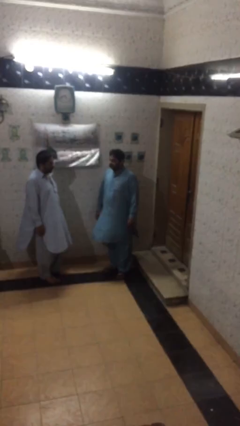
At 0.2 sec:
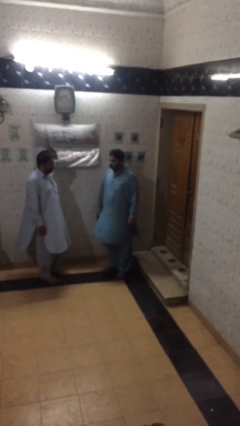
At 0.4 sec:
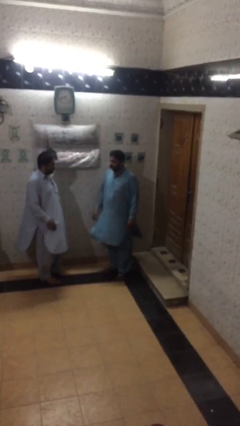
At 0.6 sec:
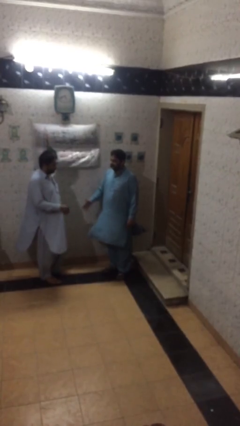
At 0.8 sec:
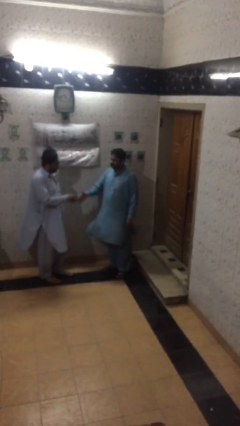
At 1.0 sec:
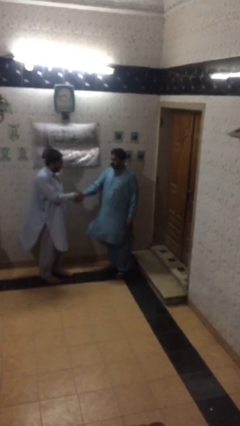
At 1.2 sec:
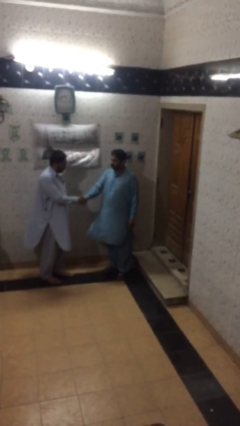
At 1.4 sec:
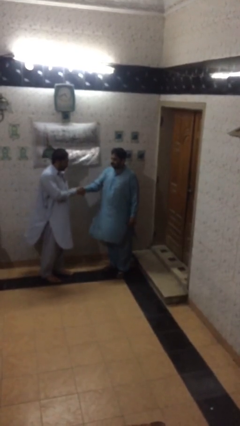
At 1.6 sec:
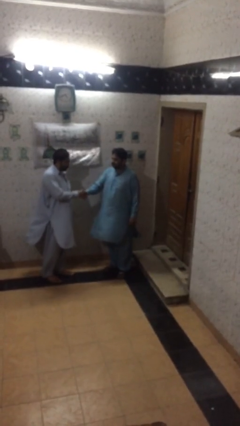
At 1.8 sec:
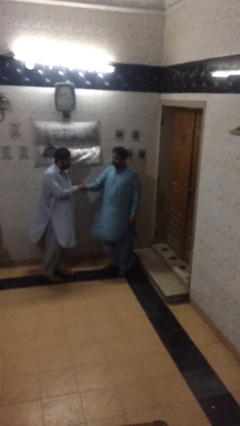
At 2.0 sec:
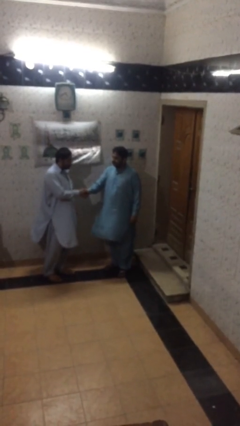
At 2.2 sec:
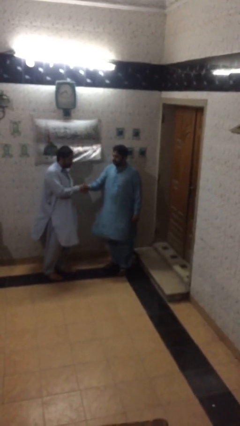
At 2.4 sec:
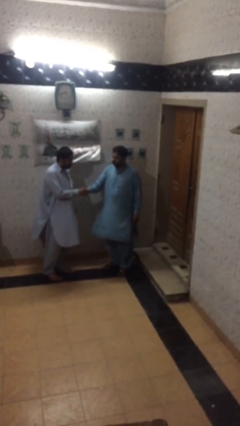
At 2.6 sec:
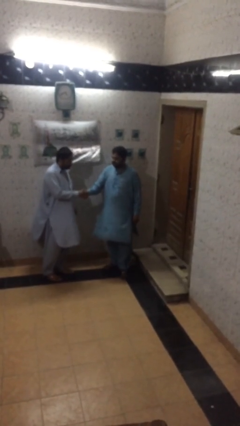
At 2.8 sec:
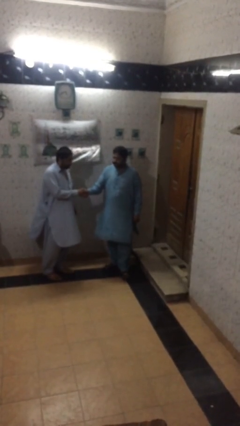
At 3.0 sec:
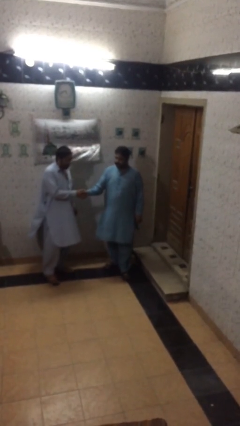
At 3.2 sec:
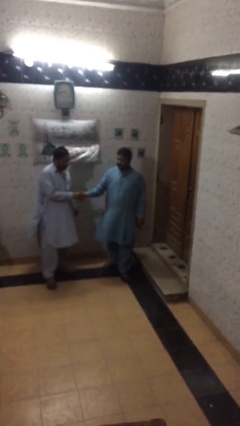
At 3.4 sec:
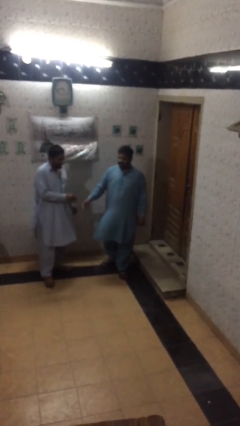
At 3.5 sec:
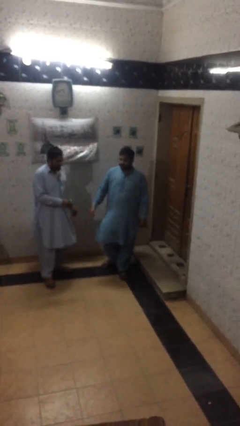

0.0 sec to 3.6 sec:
person shakes hand

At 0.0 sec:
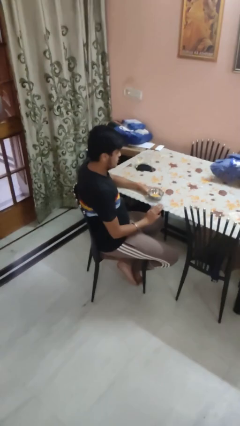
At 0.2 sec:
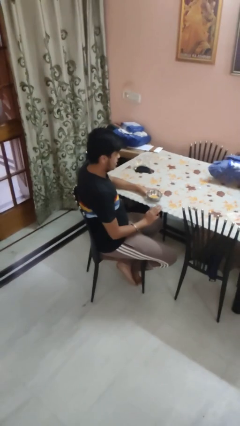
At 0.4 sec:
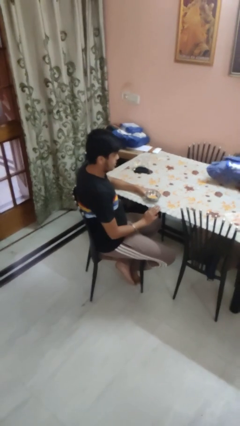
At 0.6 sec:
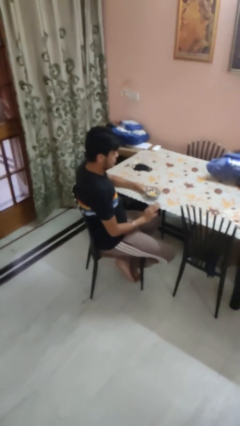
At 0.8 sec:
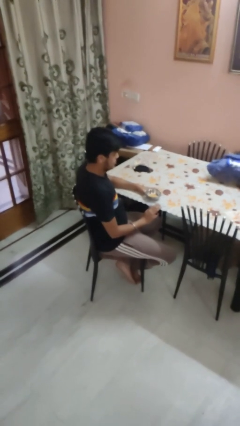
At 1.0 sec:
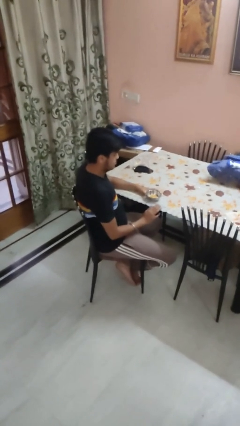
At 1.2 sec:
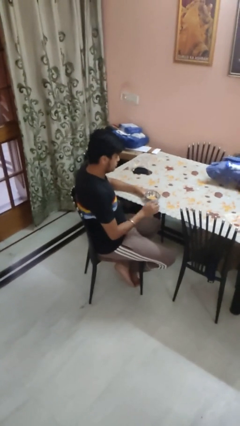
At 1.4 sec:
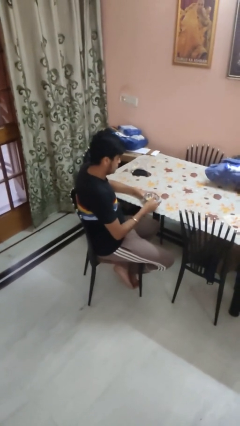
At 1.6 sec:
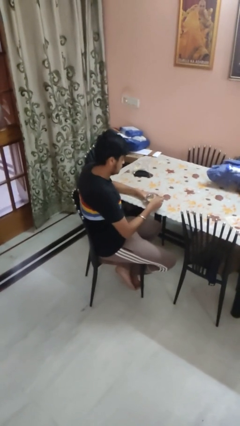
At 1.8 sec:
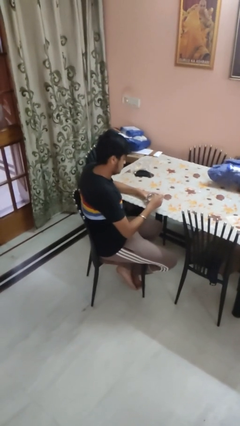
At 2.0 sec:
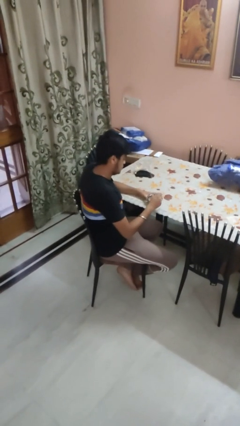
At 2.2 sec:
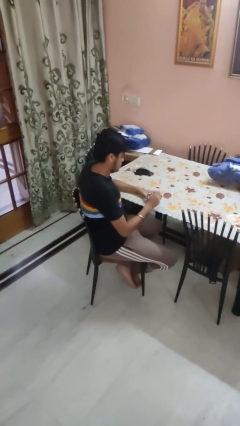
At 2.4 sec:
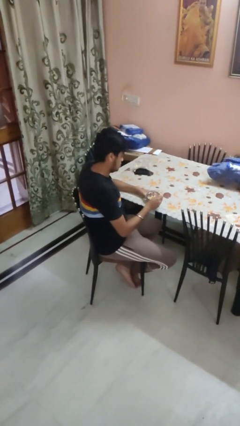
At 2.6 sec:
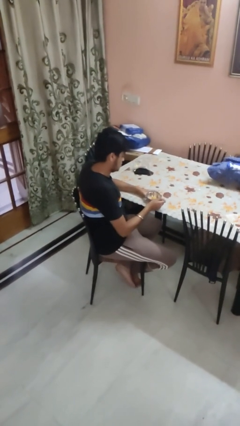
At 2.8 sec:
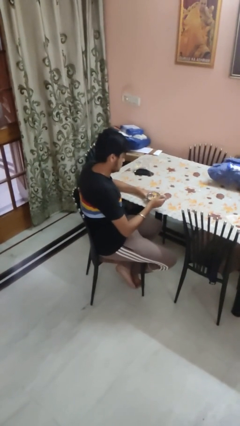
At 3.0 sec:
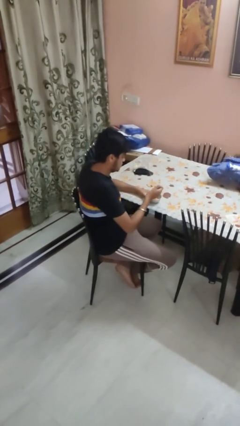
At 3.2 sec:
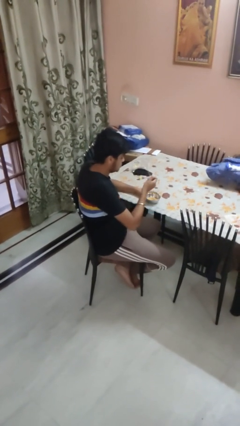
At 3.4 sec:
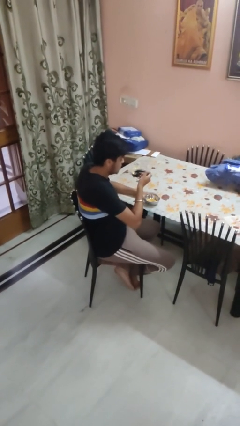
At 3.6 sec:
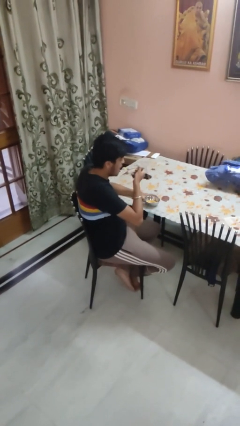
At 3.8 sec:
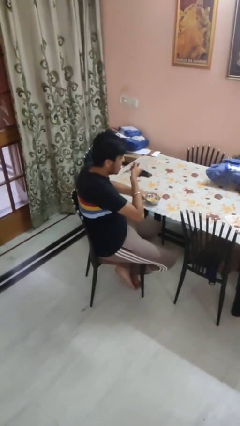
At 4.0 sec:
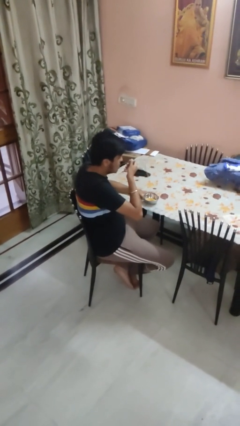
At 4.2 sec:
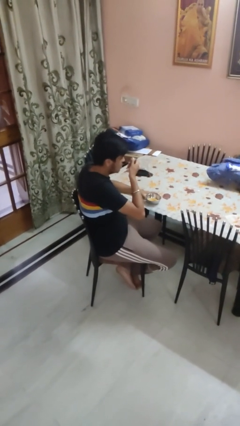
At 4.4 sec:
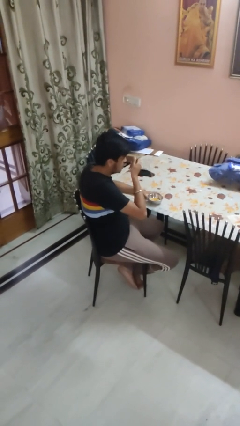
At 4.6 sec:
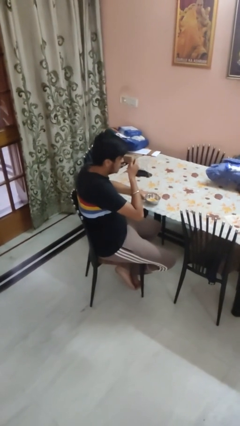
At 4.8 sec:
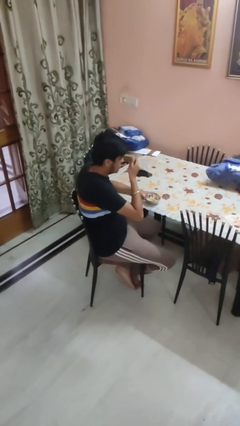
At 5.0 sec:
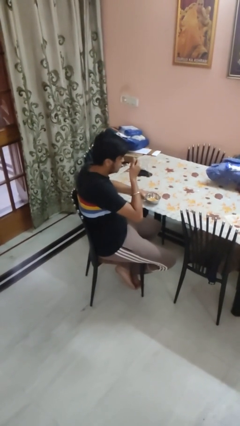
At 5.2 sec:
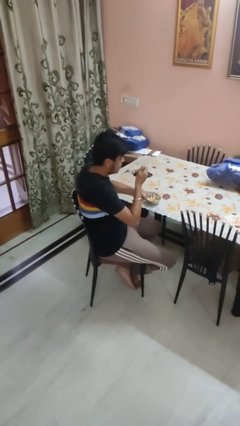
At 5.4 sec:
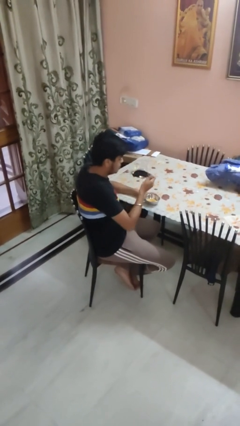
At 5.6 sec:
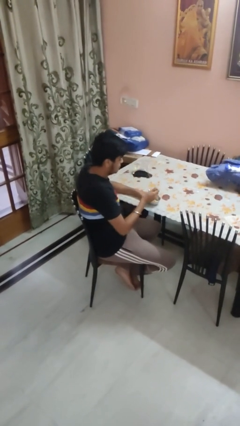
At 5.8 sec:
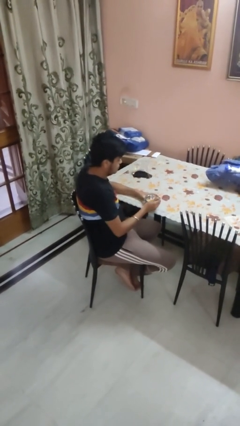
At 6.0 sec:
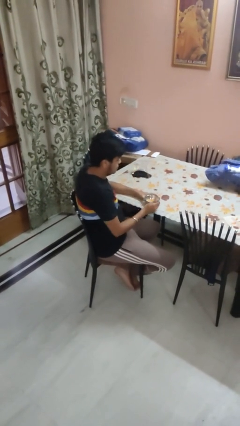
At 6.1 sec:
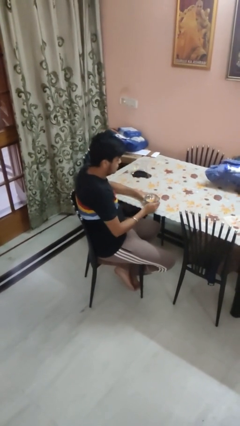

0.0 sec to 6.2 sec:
person eats with utensil

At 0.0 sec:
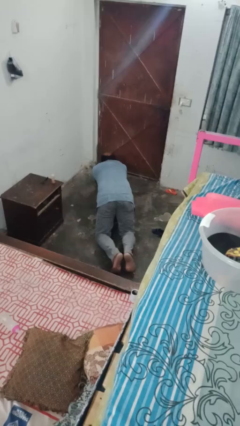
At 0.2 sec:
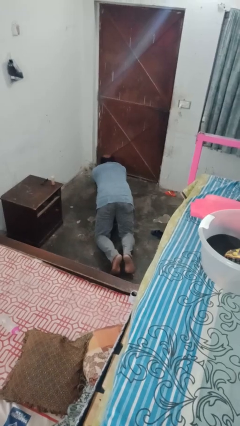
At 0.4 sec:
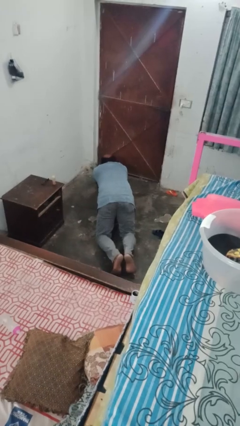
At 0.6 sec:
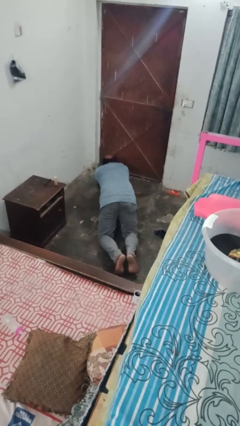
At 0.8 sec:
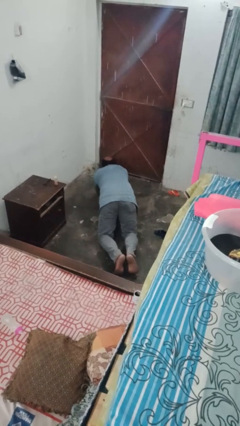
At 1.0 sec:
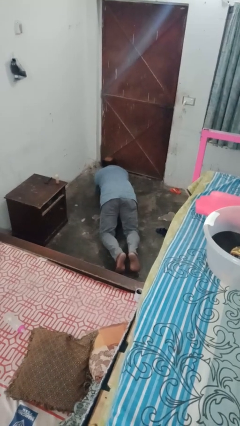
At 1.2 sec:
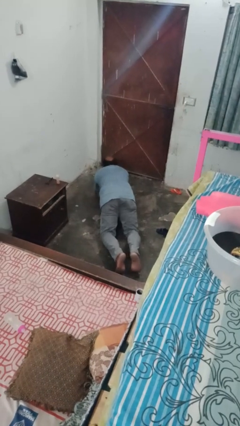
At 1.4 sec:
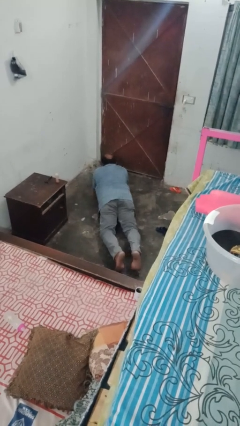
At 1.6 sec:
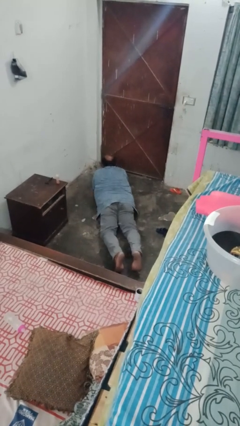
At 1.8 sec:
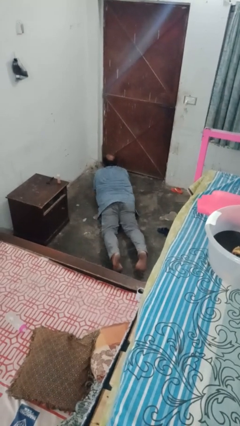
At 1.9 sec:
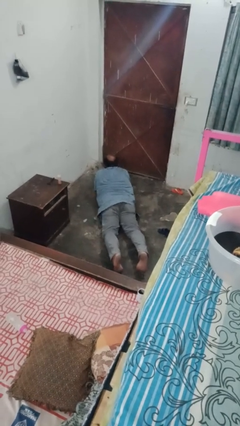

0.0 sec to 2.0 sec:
person stands up from floor

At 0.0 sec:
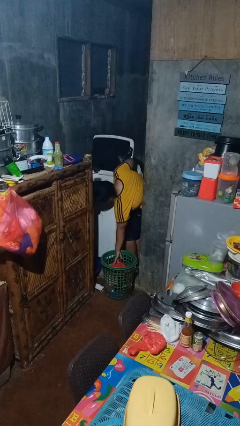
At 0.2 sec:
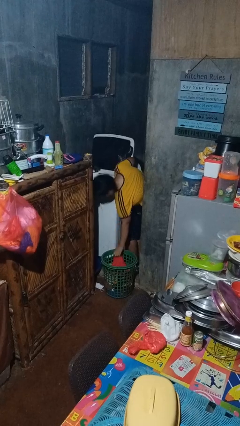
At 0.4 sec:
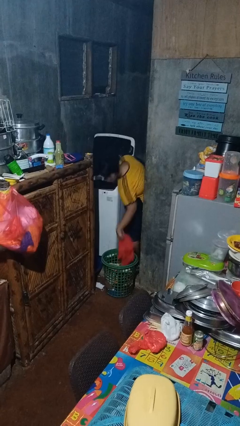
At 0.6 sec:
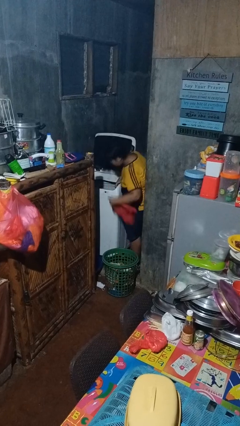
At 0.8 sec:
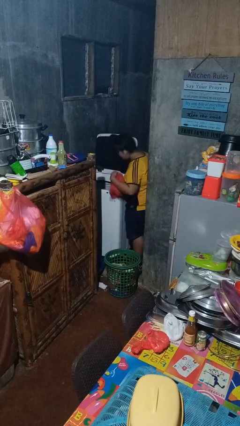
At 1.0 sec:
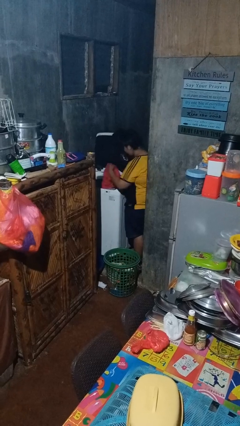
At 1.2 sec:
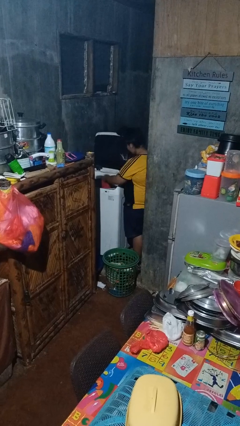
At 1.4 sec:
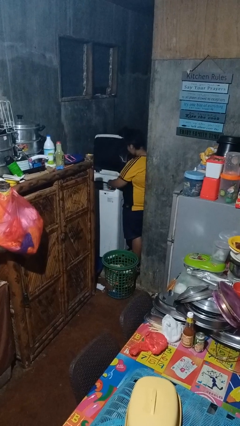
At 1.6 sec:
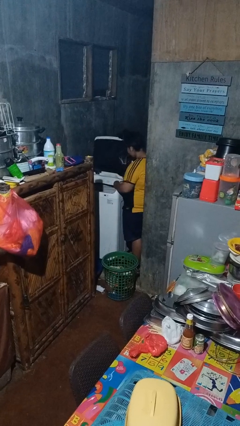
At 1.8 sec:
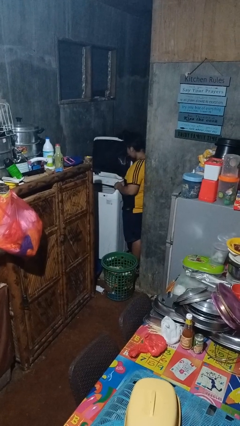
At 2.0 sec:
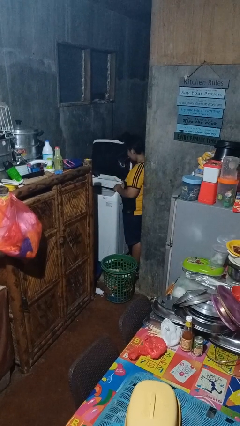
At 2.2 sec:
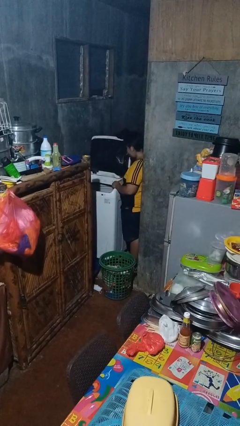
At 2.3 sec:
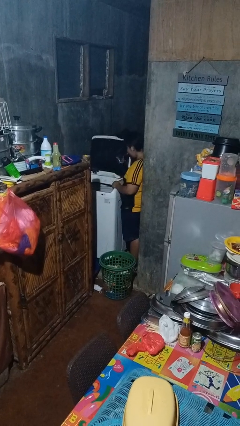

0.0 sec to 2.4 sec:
person loads clotheswasher

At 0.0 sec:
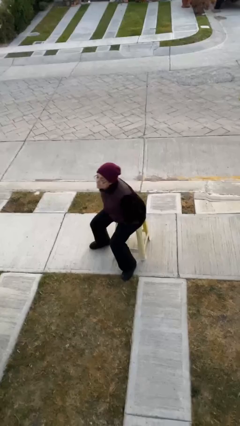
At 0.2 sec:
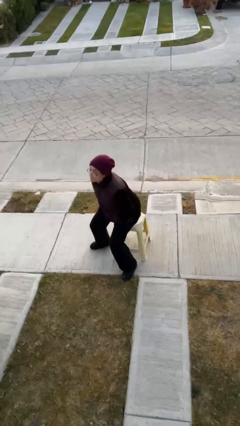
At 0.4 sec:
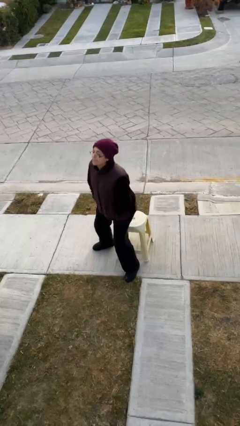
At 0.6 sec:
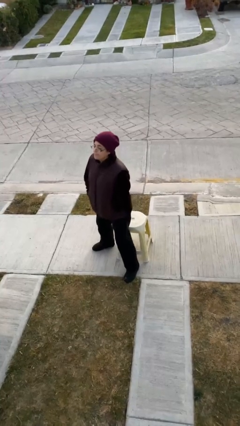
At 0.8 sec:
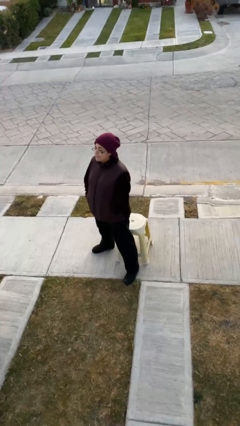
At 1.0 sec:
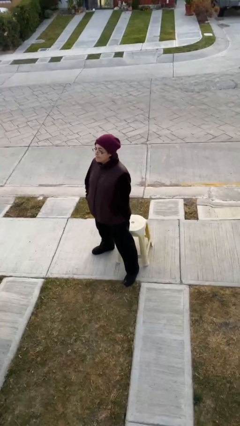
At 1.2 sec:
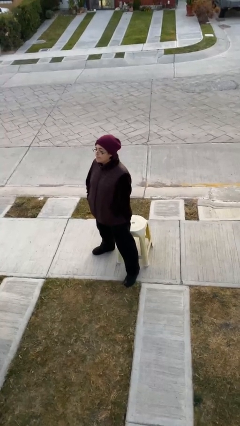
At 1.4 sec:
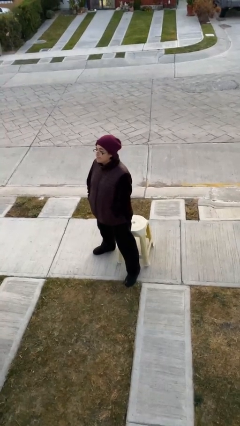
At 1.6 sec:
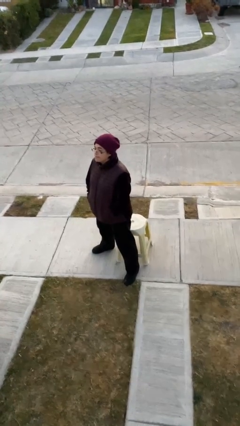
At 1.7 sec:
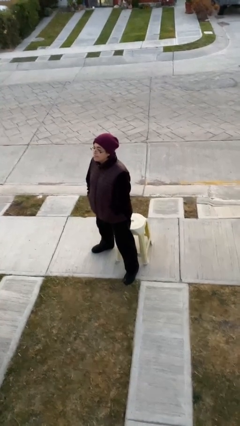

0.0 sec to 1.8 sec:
person stands up

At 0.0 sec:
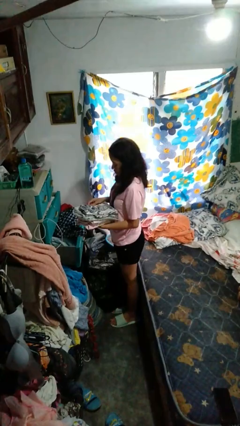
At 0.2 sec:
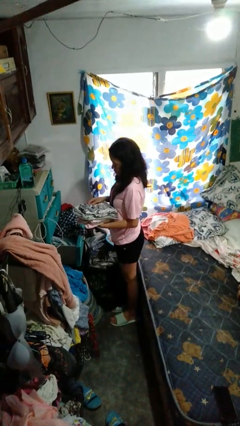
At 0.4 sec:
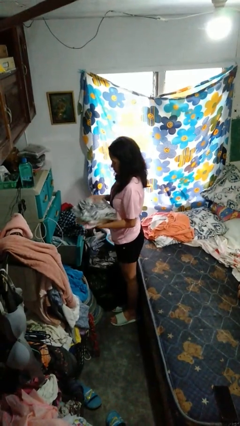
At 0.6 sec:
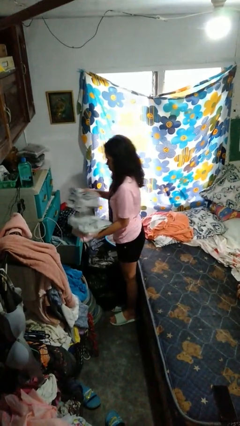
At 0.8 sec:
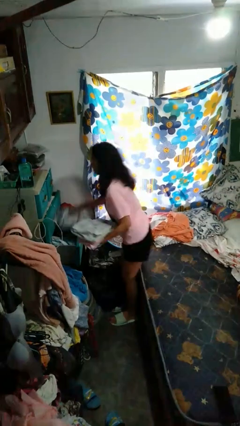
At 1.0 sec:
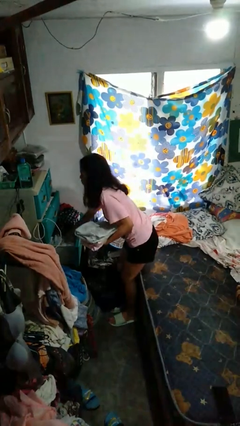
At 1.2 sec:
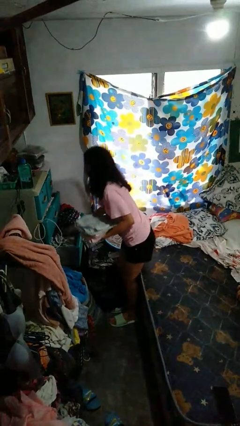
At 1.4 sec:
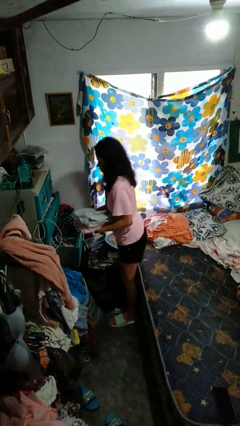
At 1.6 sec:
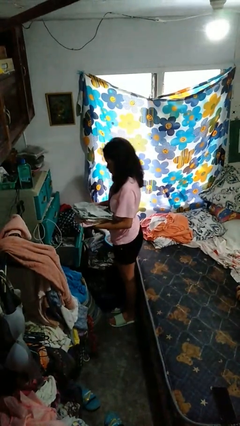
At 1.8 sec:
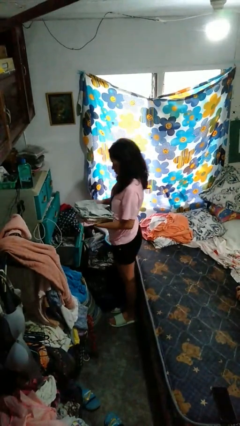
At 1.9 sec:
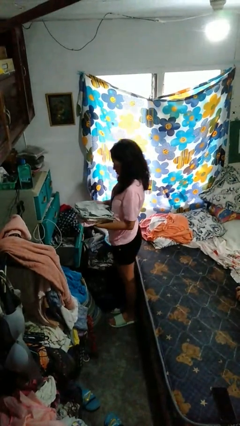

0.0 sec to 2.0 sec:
person puts clothes into dresser
